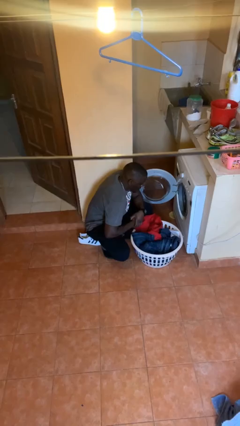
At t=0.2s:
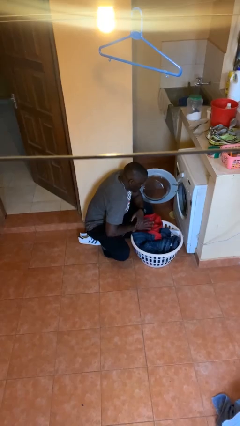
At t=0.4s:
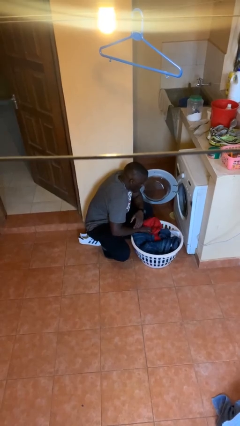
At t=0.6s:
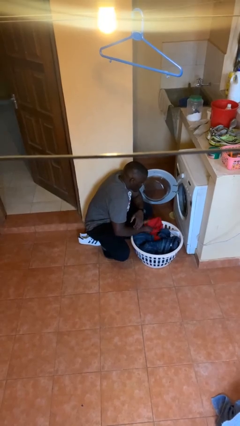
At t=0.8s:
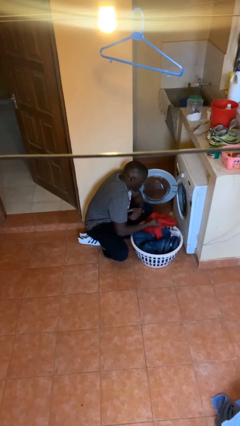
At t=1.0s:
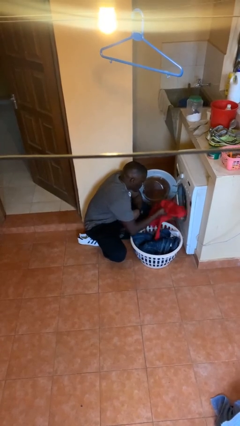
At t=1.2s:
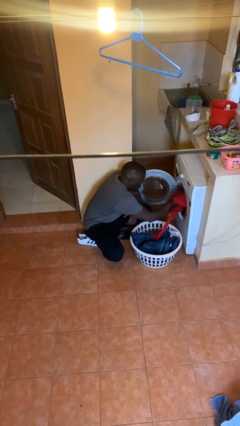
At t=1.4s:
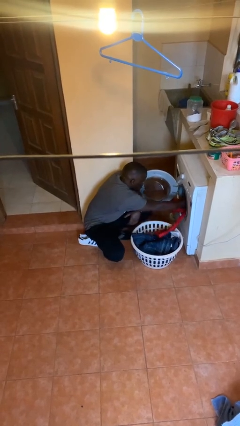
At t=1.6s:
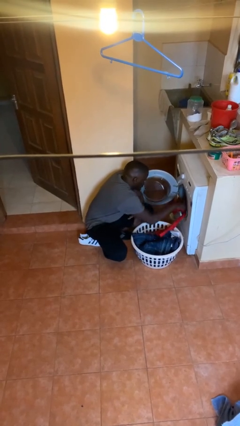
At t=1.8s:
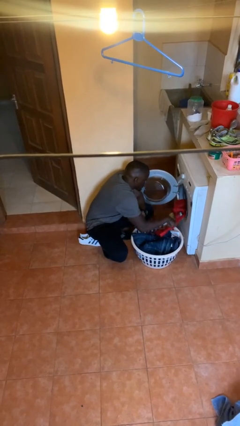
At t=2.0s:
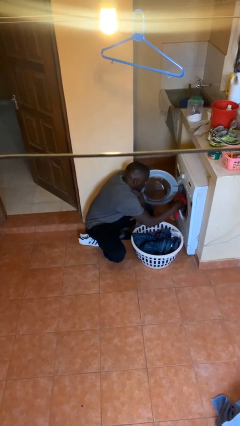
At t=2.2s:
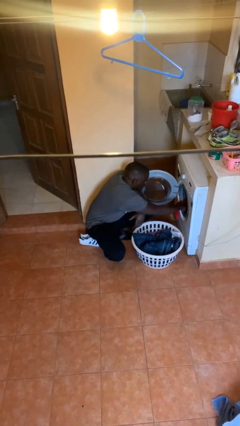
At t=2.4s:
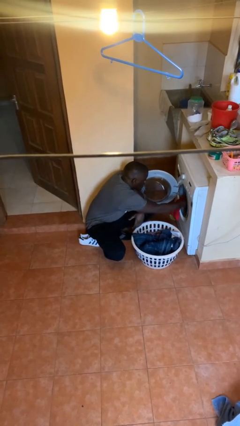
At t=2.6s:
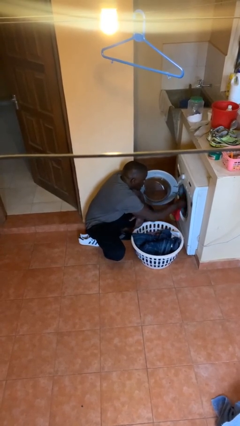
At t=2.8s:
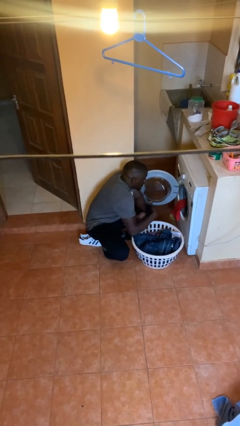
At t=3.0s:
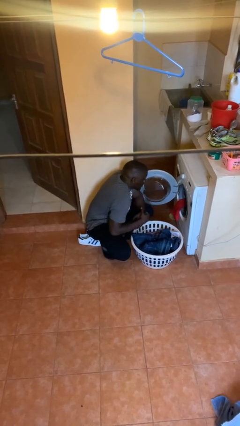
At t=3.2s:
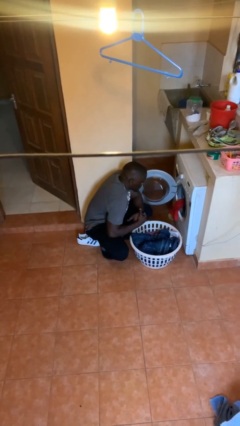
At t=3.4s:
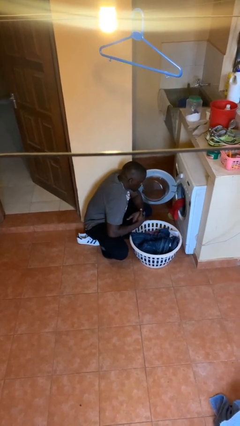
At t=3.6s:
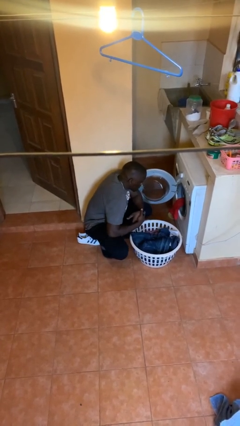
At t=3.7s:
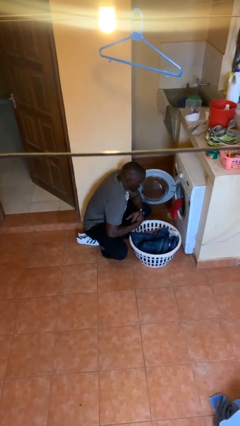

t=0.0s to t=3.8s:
person loads dryer

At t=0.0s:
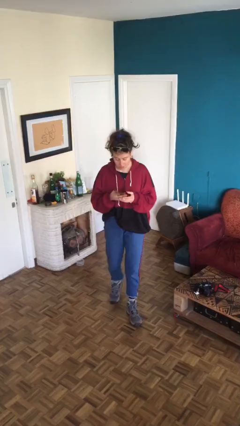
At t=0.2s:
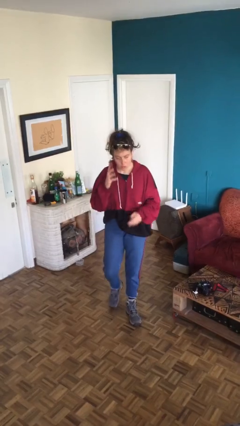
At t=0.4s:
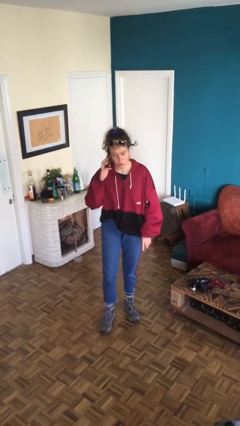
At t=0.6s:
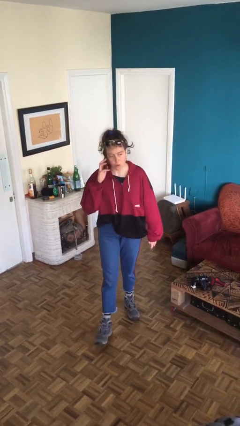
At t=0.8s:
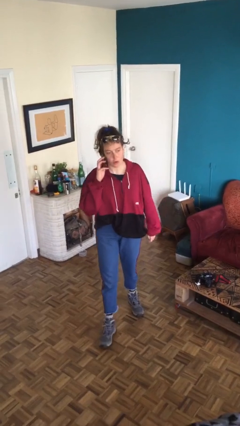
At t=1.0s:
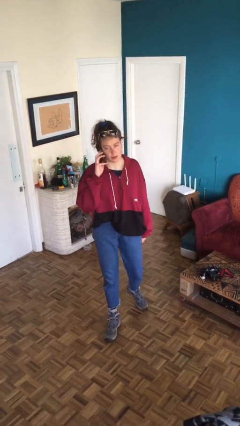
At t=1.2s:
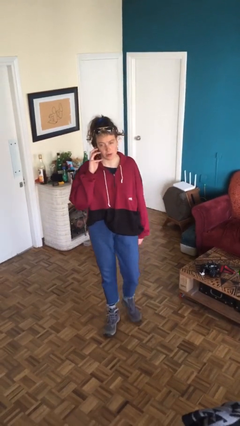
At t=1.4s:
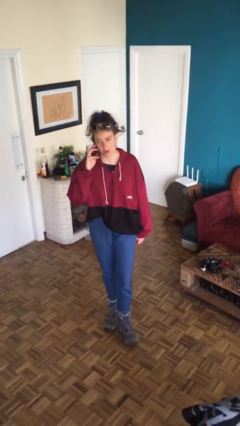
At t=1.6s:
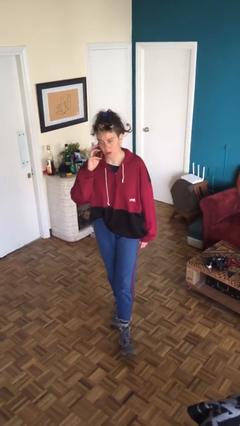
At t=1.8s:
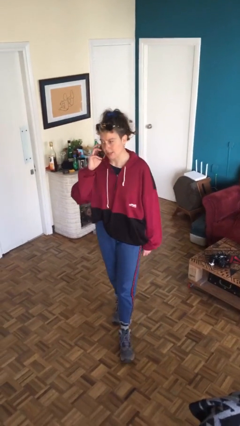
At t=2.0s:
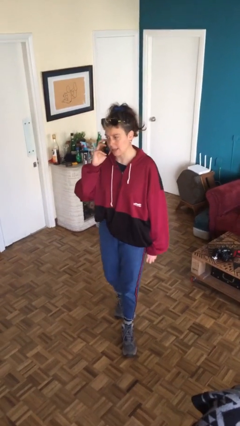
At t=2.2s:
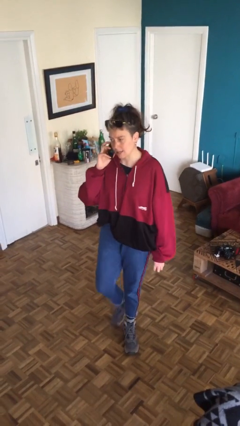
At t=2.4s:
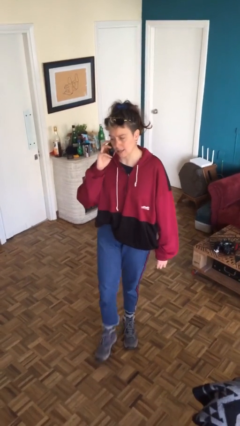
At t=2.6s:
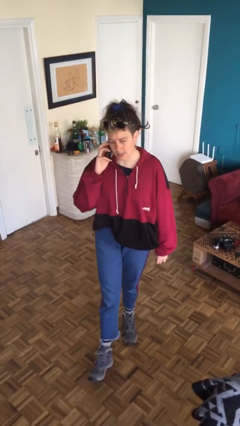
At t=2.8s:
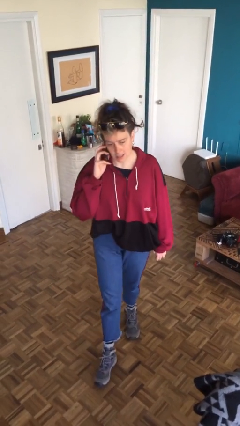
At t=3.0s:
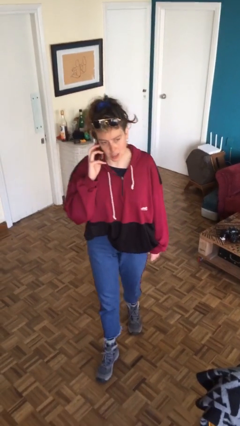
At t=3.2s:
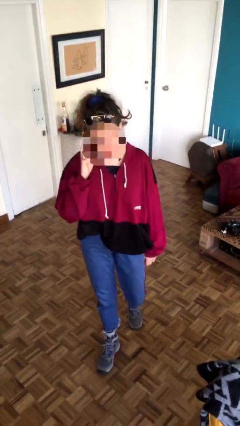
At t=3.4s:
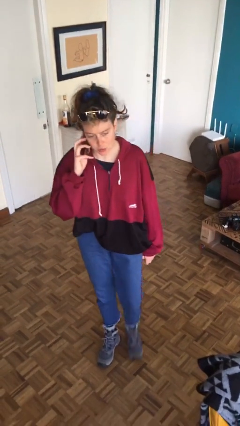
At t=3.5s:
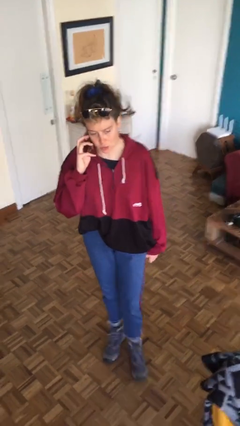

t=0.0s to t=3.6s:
person talks on phone

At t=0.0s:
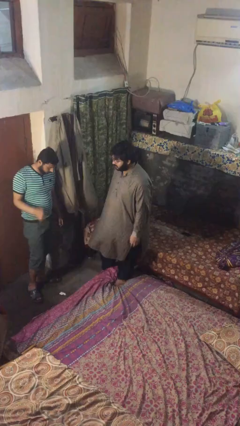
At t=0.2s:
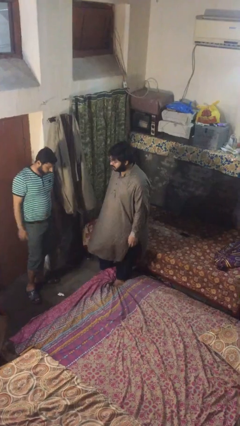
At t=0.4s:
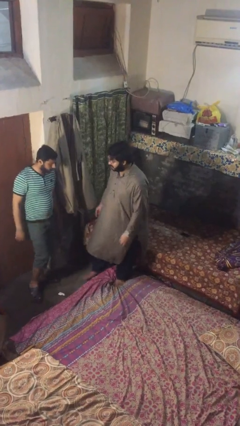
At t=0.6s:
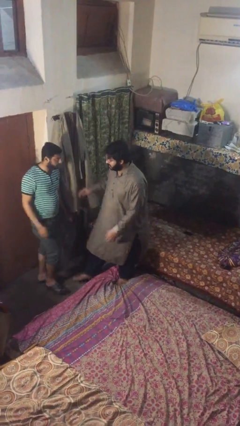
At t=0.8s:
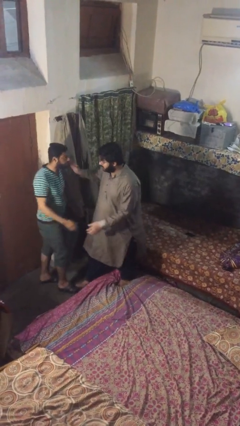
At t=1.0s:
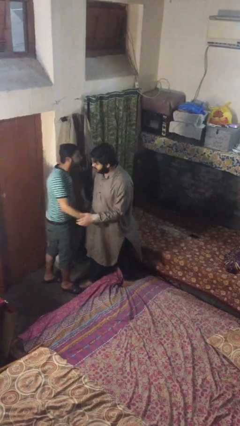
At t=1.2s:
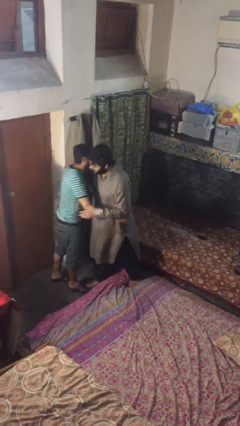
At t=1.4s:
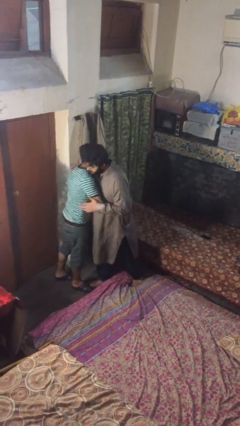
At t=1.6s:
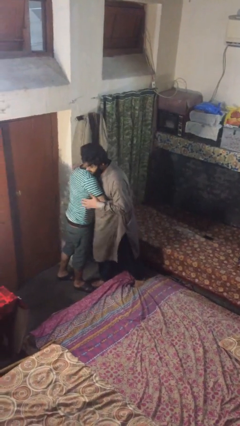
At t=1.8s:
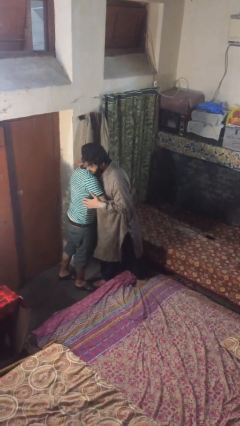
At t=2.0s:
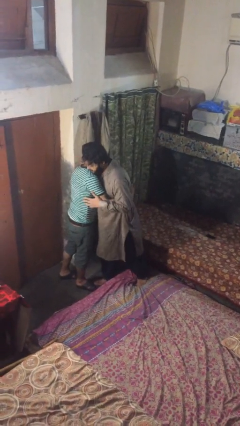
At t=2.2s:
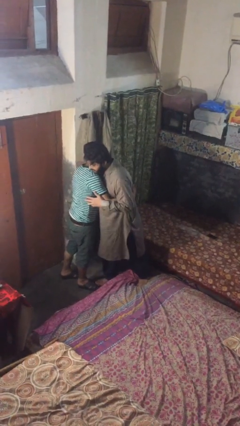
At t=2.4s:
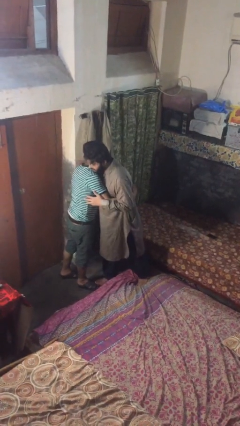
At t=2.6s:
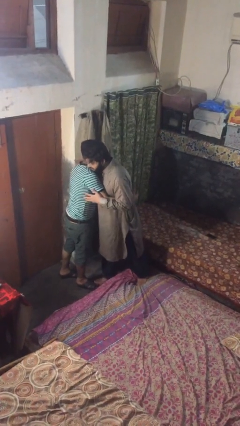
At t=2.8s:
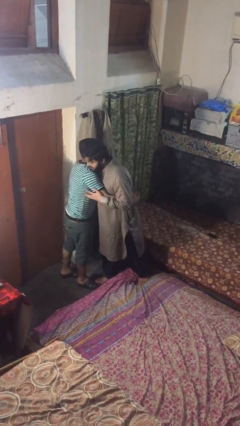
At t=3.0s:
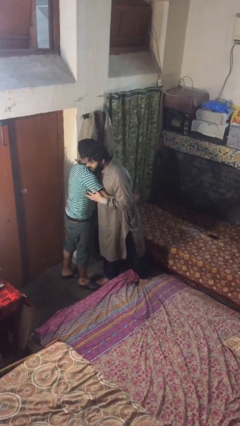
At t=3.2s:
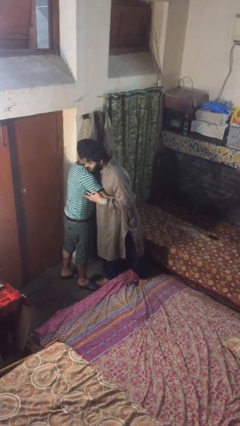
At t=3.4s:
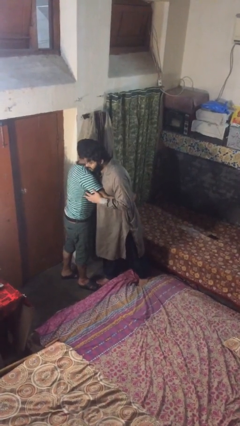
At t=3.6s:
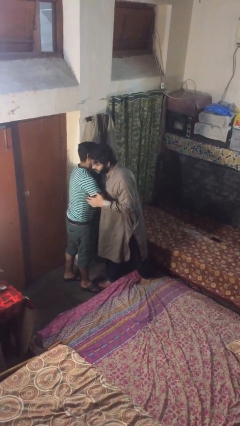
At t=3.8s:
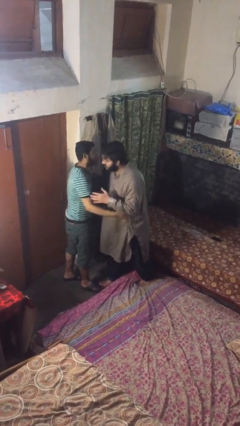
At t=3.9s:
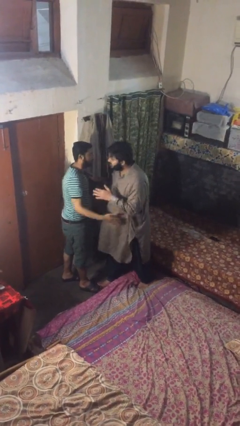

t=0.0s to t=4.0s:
person embraces person

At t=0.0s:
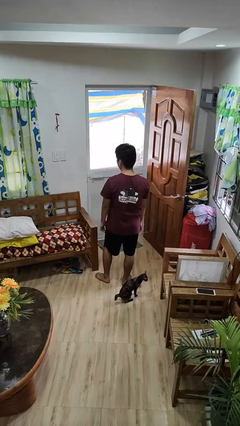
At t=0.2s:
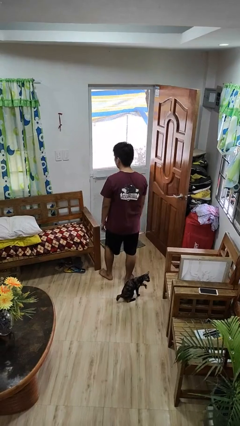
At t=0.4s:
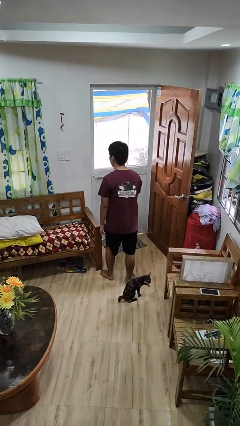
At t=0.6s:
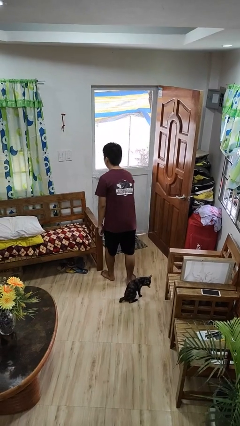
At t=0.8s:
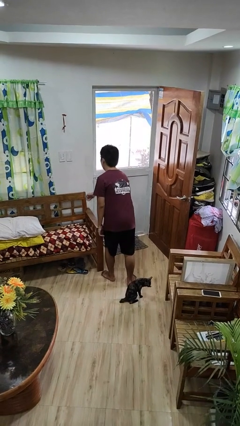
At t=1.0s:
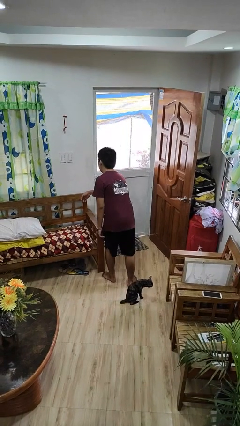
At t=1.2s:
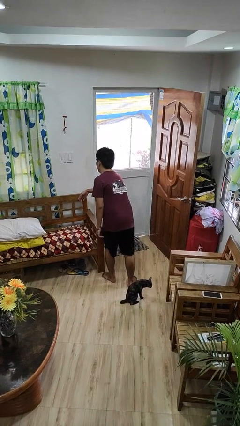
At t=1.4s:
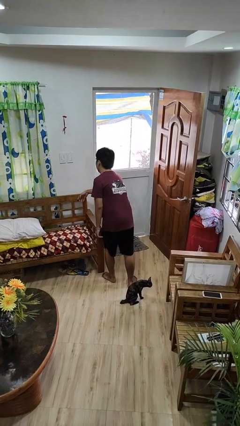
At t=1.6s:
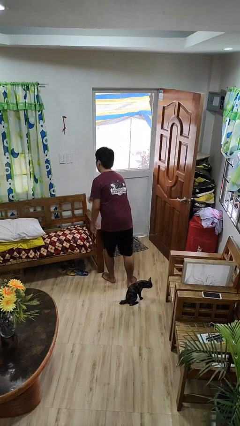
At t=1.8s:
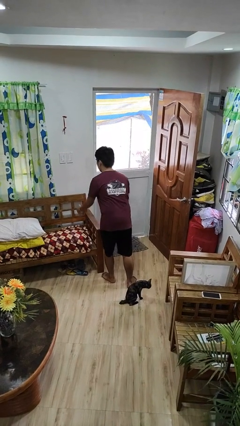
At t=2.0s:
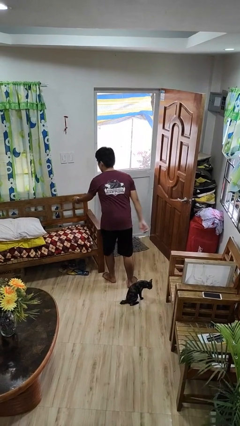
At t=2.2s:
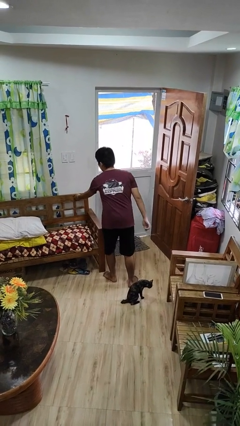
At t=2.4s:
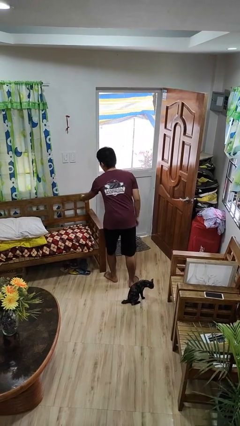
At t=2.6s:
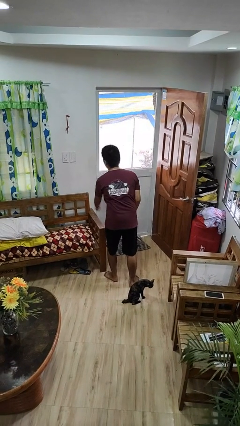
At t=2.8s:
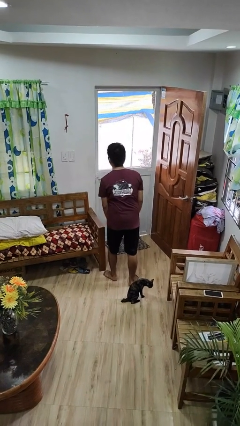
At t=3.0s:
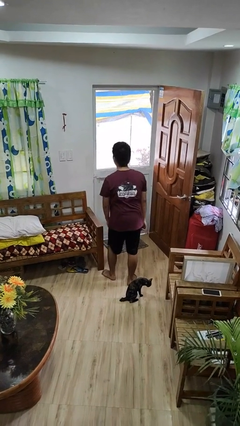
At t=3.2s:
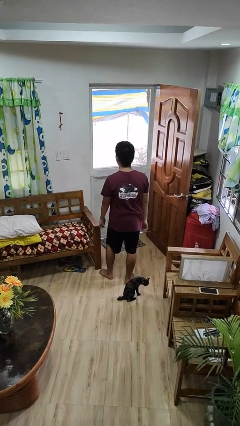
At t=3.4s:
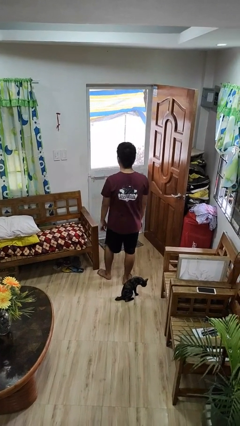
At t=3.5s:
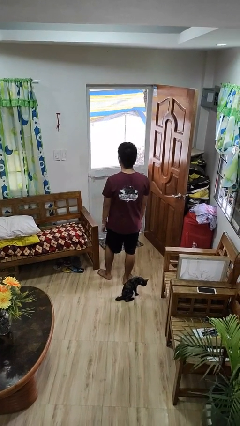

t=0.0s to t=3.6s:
person taps object with finger

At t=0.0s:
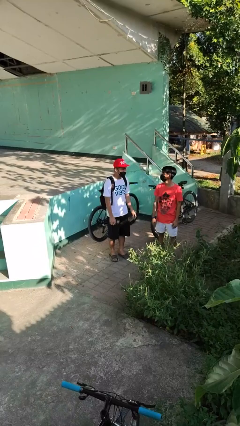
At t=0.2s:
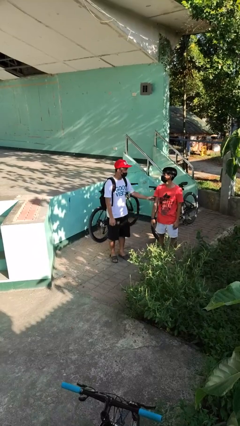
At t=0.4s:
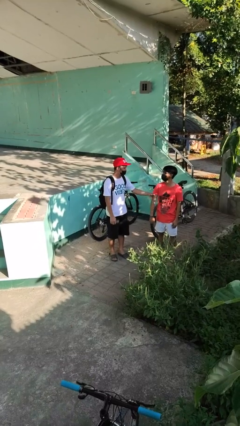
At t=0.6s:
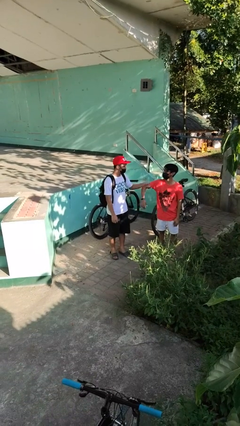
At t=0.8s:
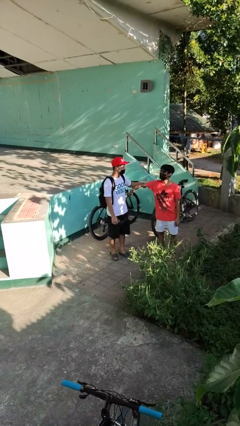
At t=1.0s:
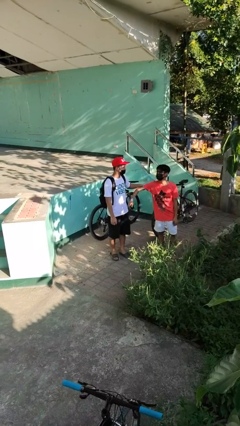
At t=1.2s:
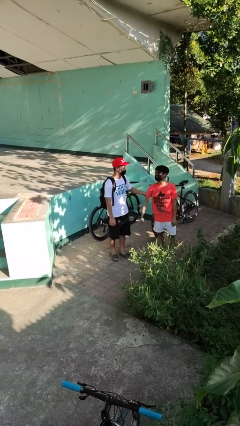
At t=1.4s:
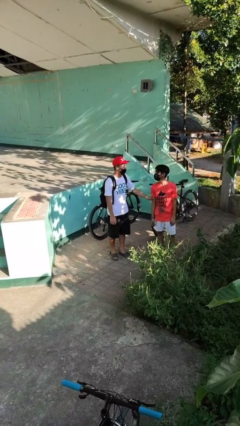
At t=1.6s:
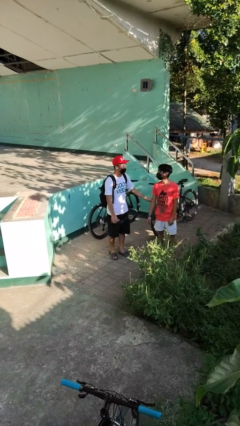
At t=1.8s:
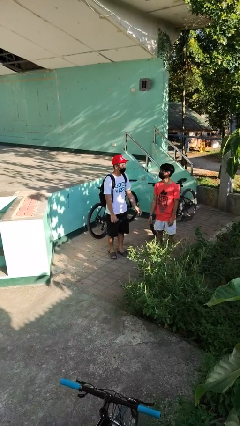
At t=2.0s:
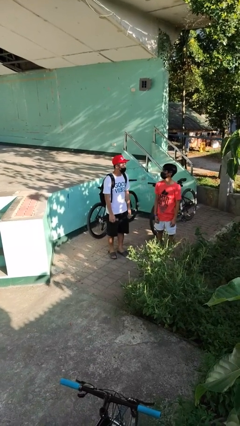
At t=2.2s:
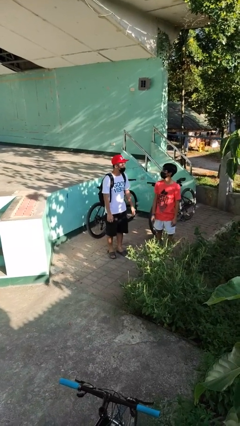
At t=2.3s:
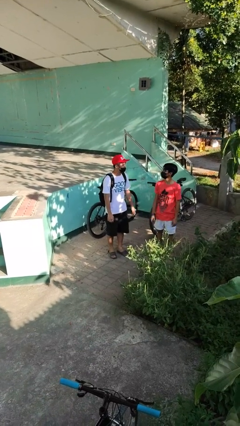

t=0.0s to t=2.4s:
person grabs person by bicep
